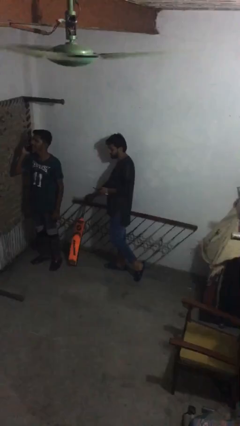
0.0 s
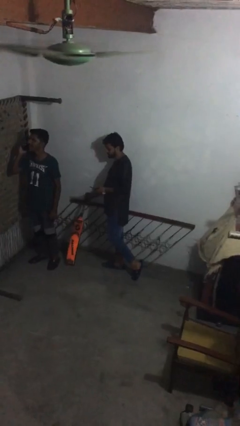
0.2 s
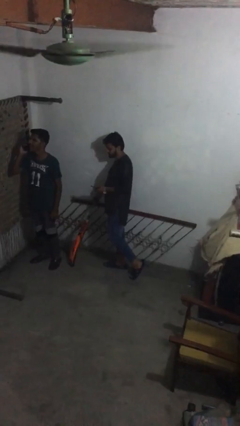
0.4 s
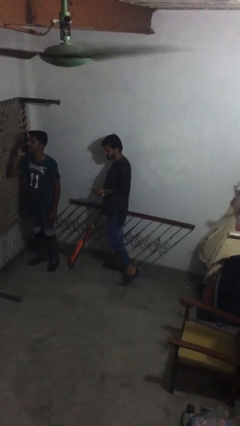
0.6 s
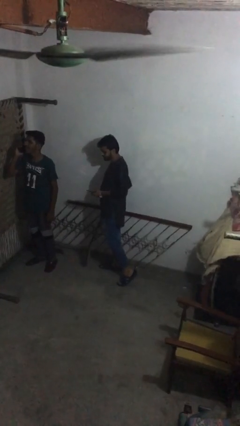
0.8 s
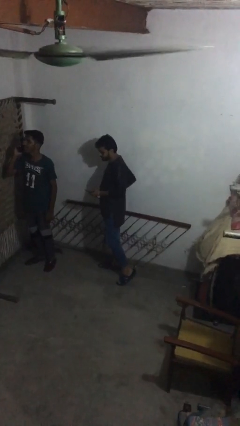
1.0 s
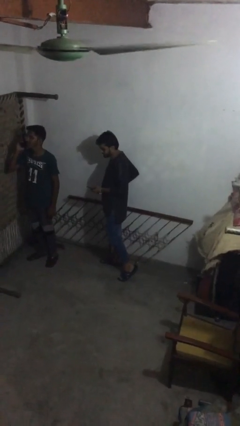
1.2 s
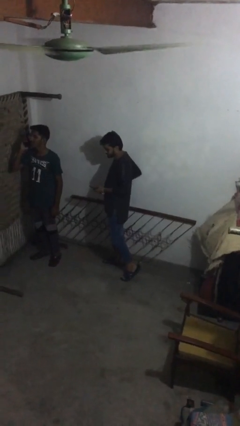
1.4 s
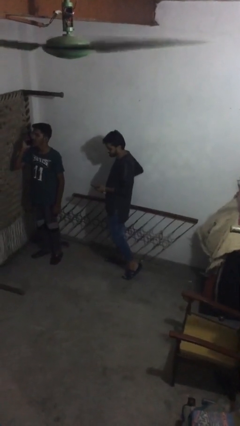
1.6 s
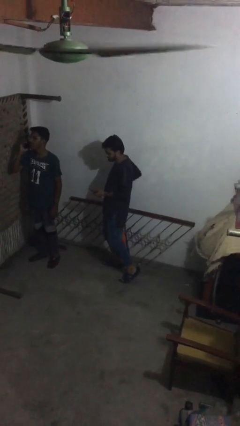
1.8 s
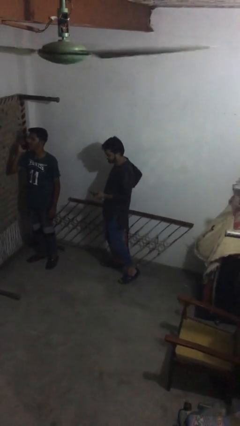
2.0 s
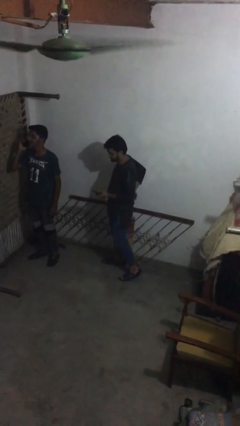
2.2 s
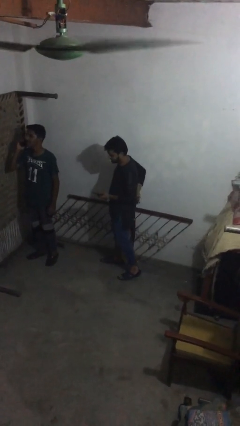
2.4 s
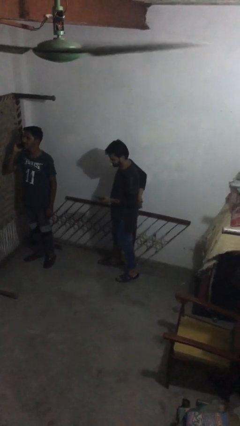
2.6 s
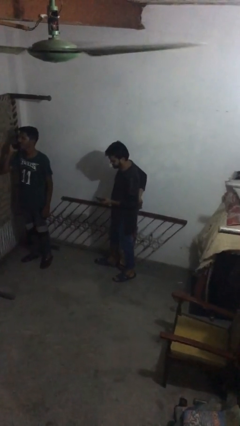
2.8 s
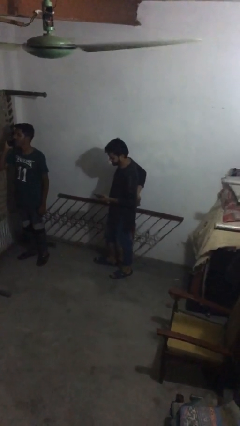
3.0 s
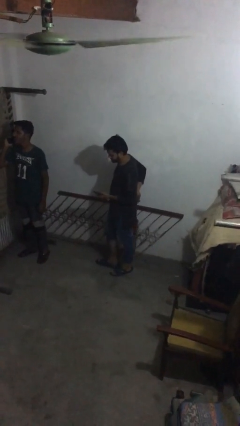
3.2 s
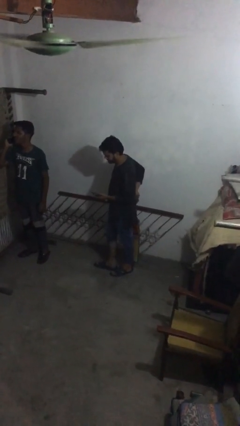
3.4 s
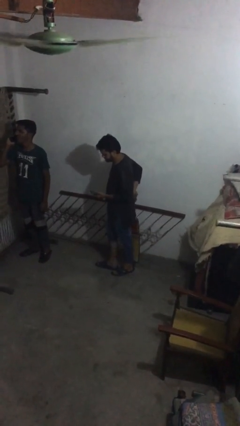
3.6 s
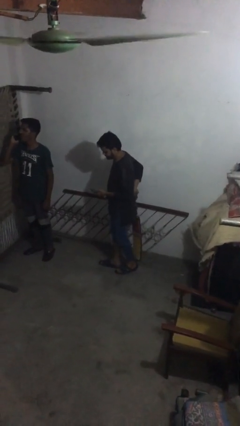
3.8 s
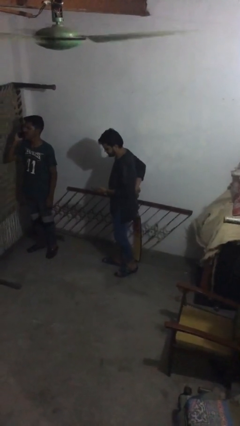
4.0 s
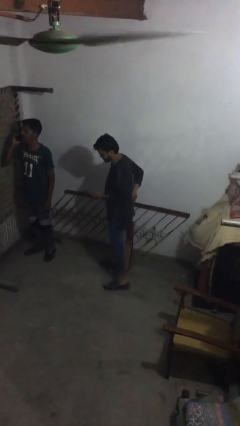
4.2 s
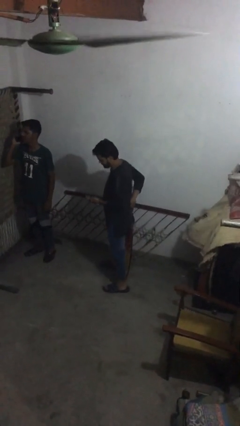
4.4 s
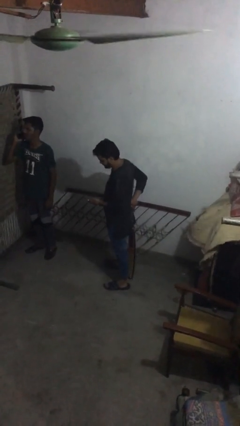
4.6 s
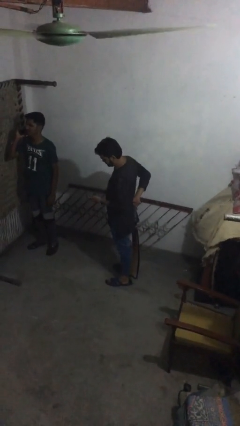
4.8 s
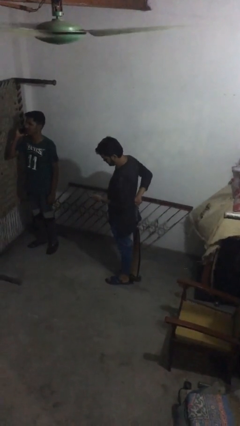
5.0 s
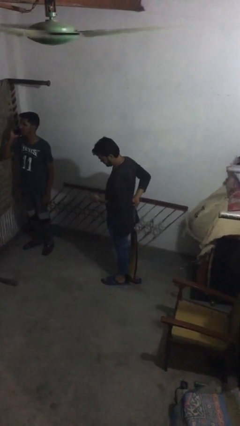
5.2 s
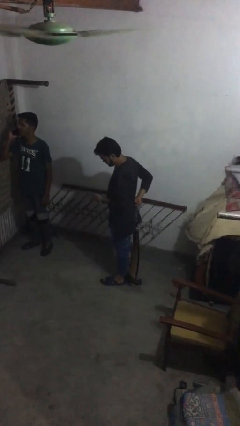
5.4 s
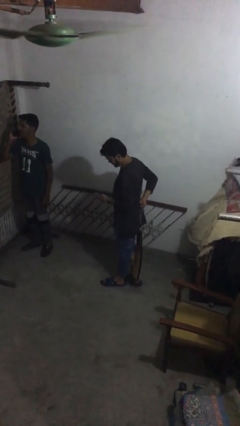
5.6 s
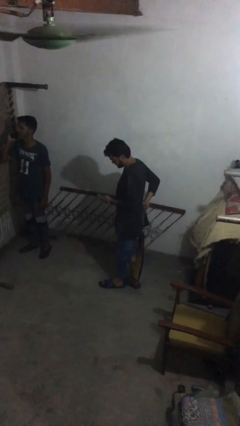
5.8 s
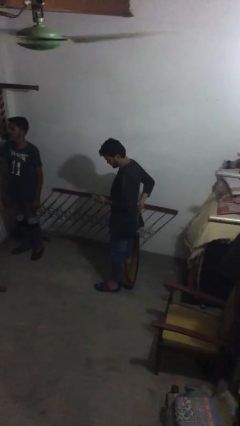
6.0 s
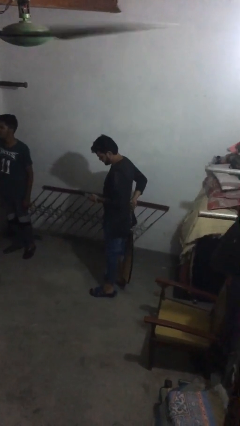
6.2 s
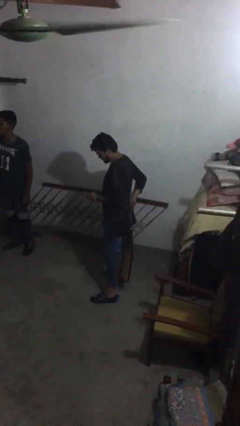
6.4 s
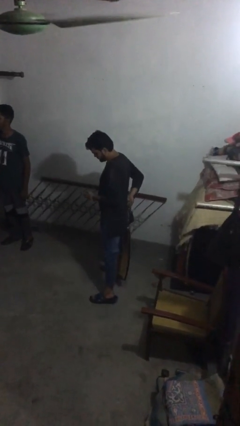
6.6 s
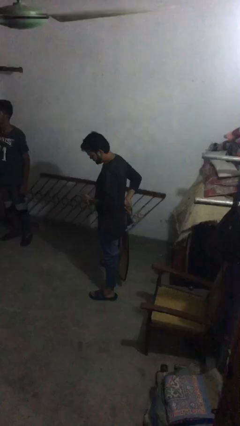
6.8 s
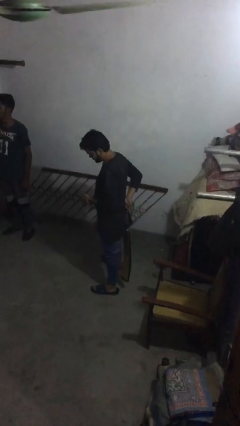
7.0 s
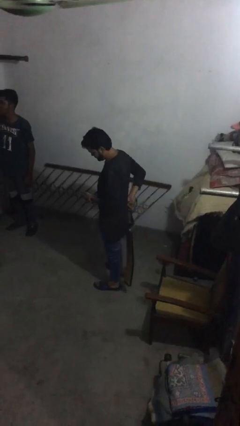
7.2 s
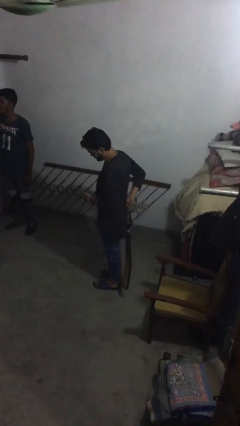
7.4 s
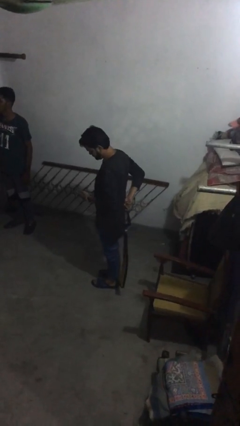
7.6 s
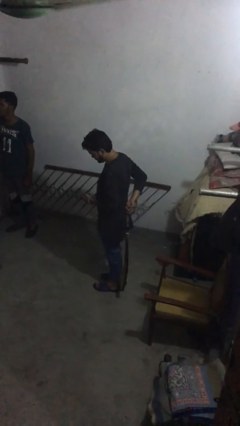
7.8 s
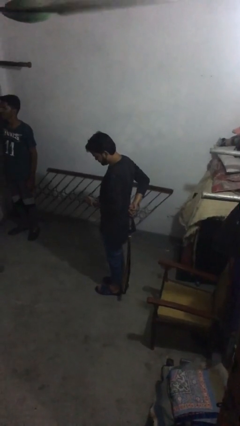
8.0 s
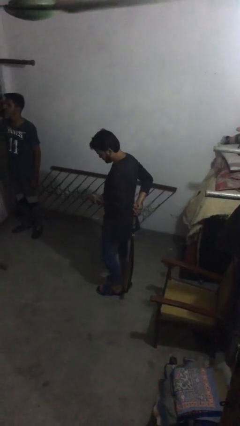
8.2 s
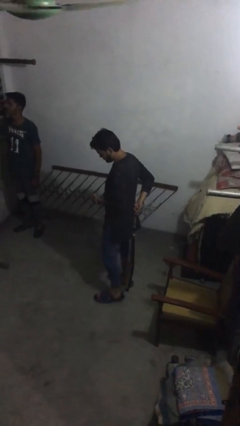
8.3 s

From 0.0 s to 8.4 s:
person steals object from person

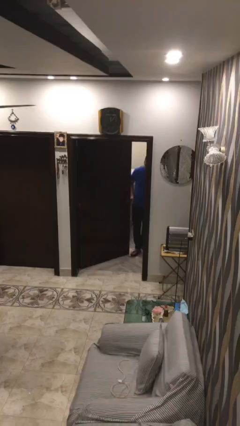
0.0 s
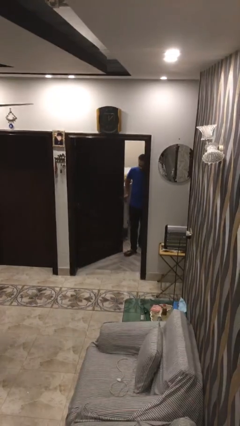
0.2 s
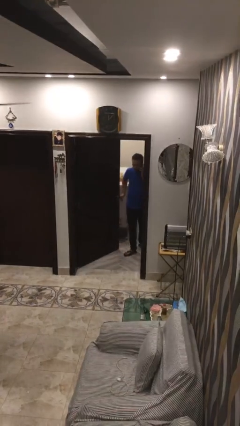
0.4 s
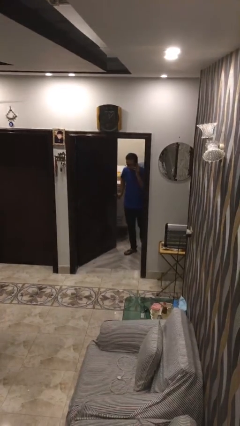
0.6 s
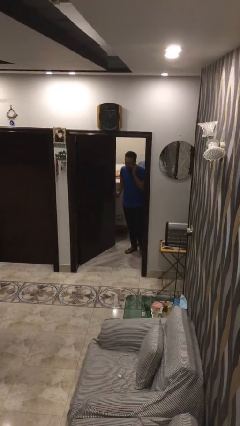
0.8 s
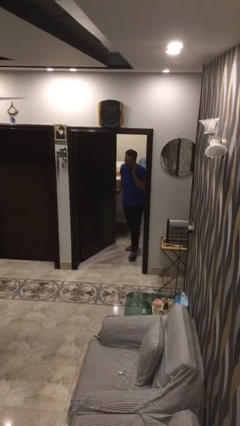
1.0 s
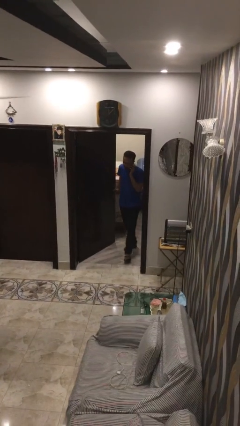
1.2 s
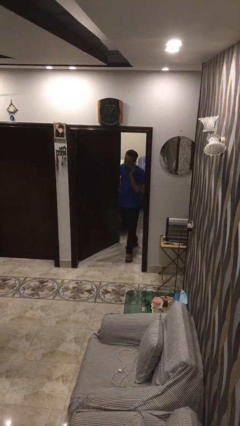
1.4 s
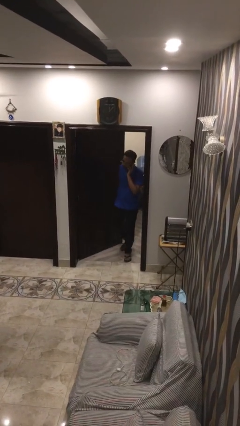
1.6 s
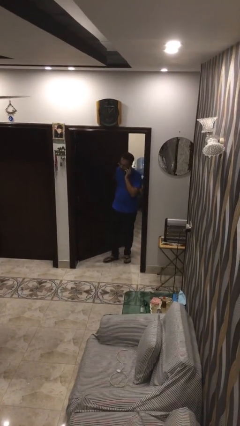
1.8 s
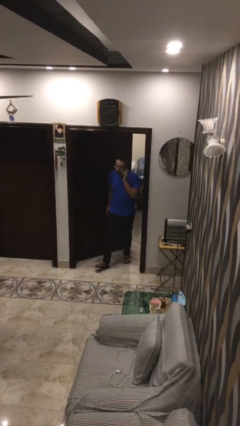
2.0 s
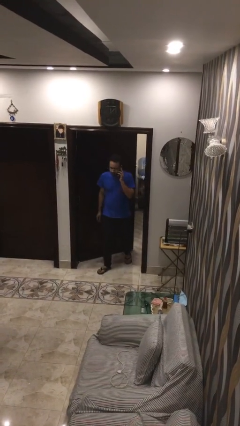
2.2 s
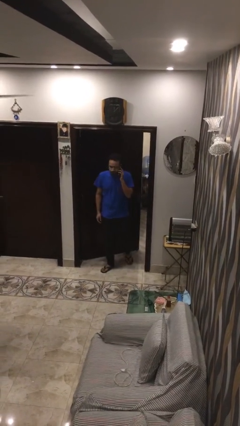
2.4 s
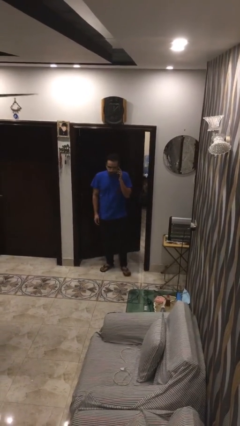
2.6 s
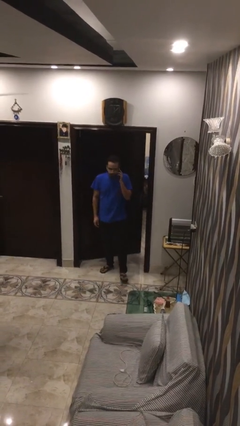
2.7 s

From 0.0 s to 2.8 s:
person enters scene through structure

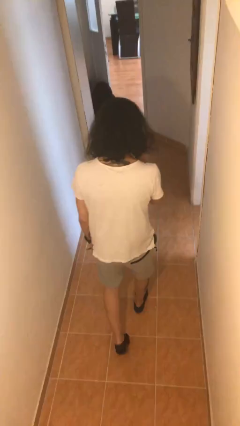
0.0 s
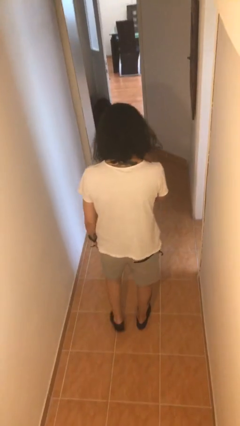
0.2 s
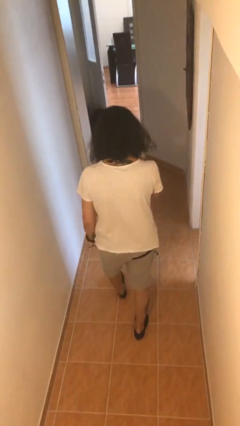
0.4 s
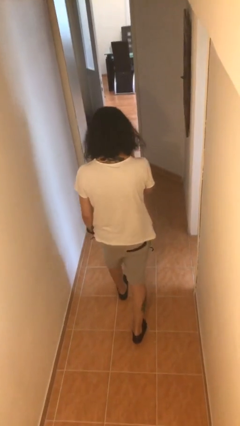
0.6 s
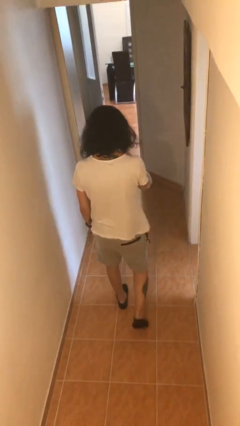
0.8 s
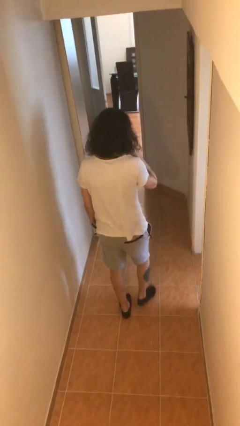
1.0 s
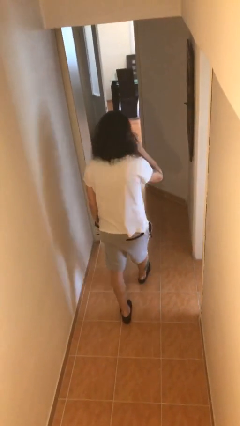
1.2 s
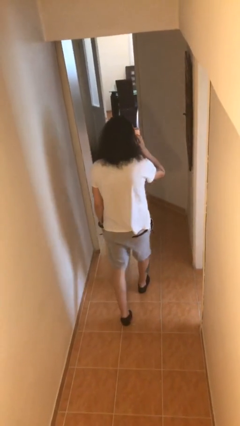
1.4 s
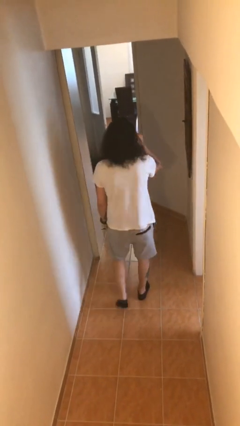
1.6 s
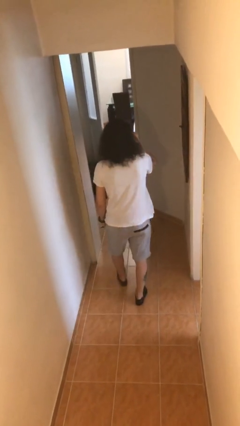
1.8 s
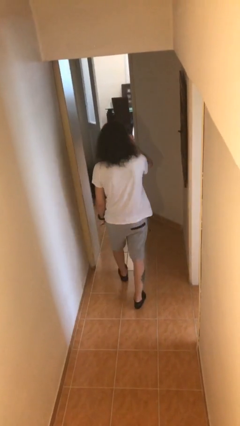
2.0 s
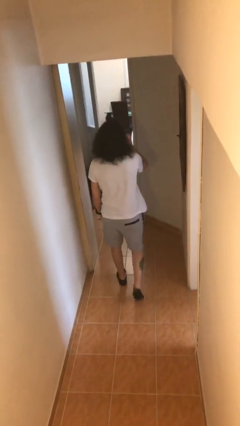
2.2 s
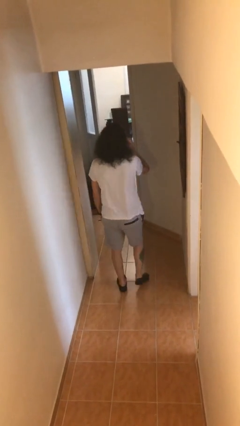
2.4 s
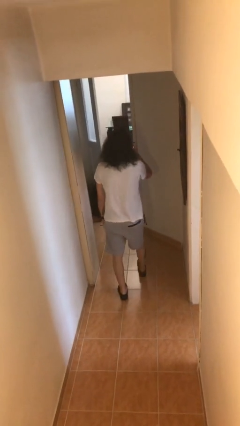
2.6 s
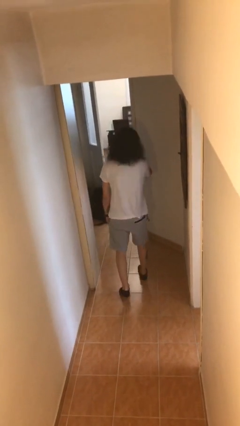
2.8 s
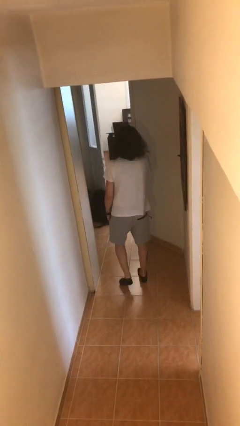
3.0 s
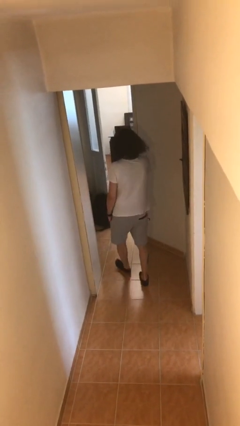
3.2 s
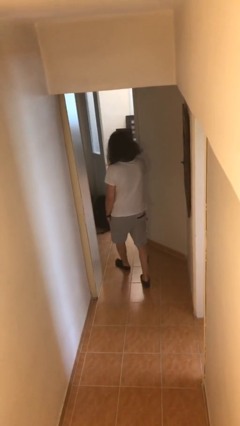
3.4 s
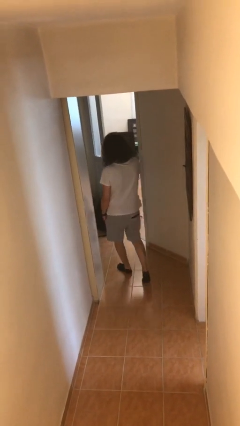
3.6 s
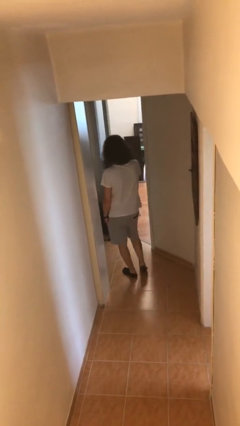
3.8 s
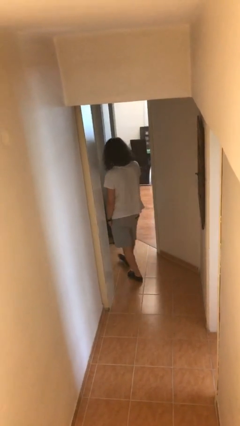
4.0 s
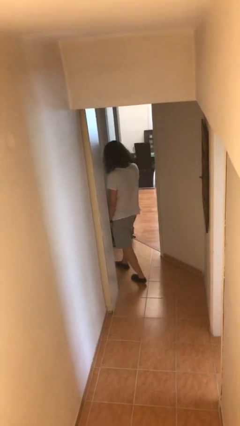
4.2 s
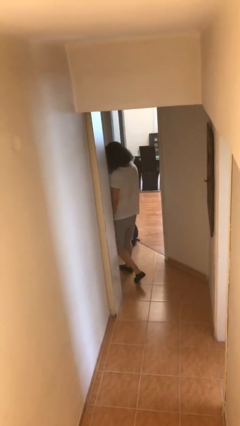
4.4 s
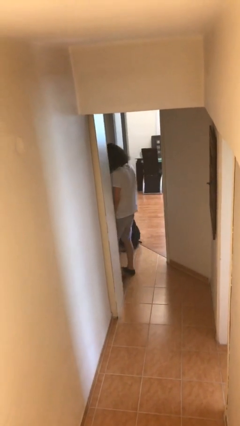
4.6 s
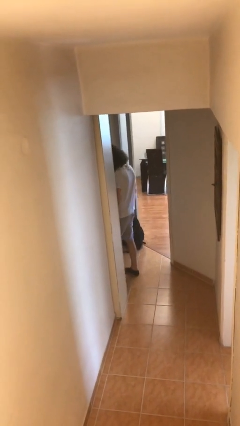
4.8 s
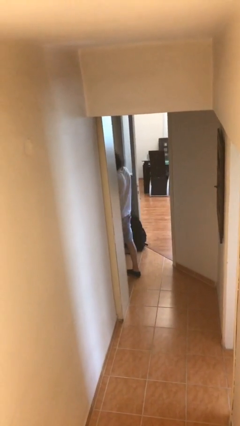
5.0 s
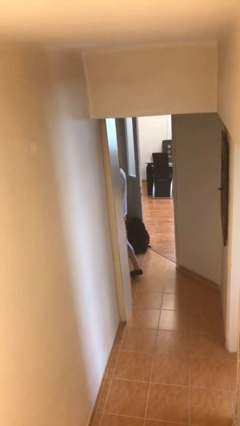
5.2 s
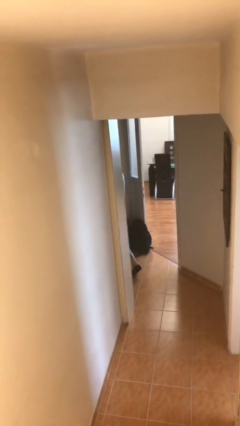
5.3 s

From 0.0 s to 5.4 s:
person exits scene through structure

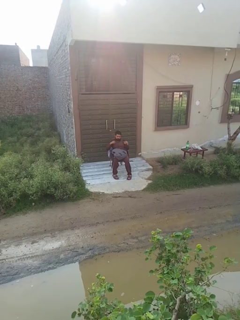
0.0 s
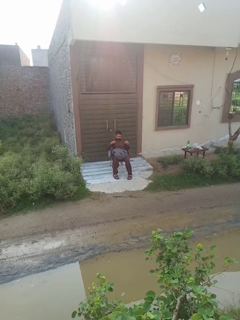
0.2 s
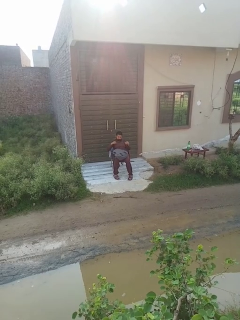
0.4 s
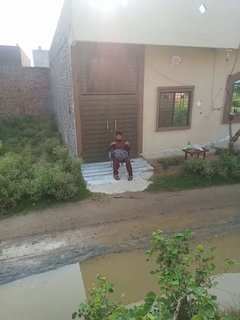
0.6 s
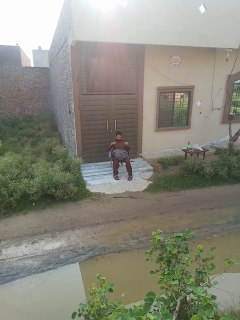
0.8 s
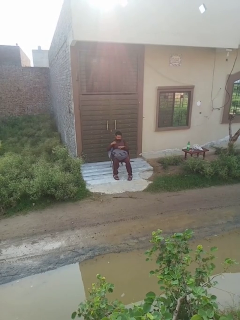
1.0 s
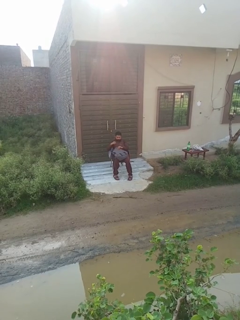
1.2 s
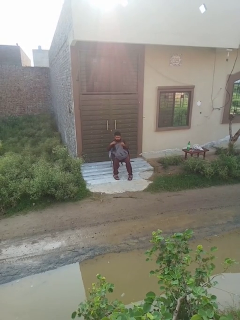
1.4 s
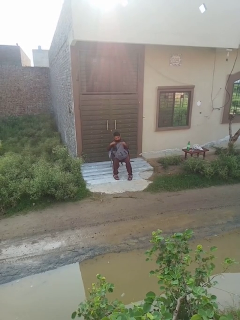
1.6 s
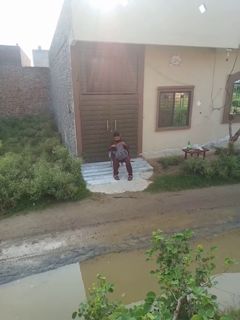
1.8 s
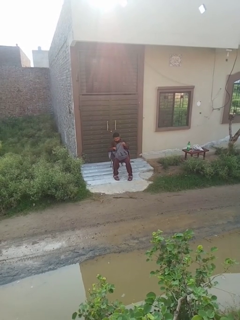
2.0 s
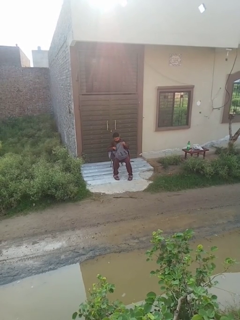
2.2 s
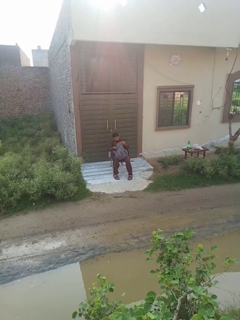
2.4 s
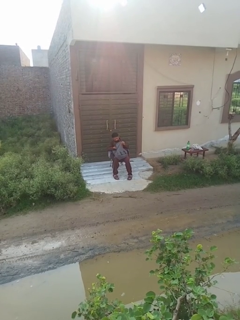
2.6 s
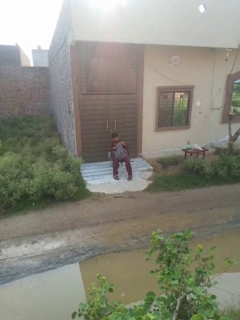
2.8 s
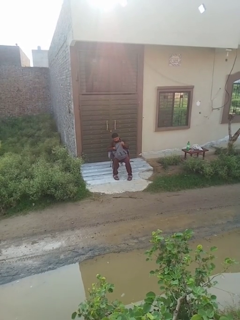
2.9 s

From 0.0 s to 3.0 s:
person searches in backpack
